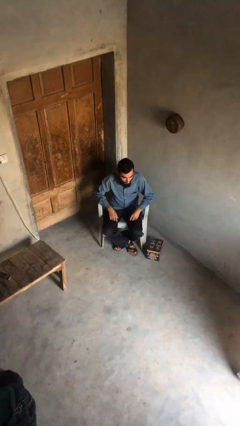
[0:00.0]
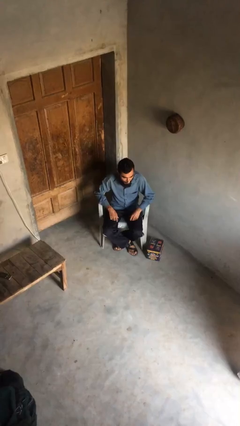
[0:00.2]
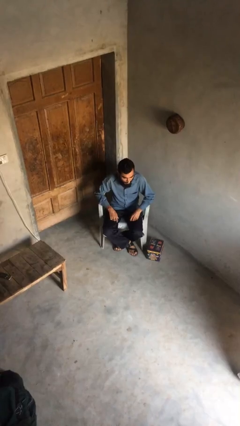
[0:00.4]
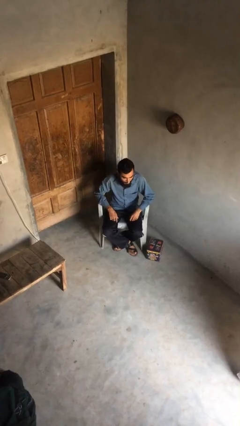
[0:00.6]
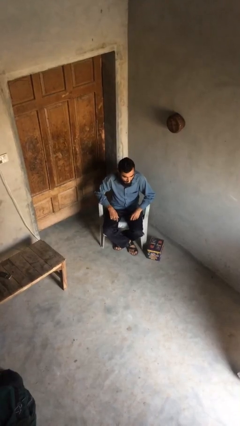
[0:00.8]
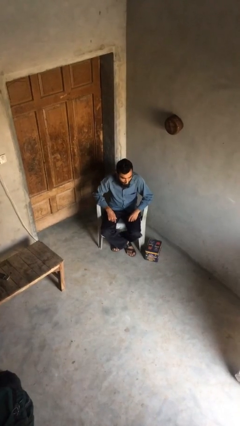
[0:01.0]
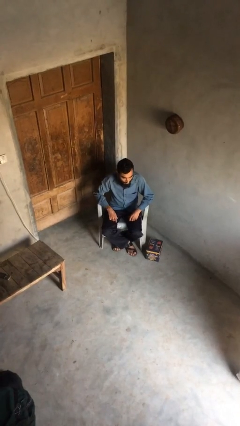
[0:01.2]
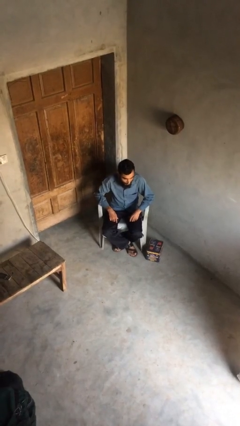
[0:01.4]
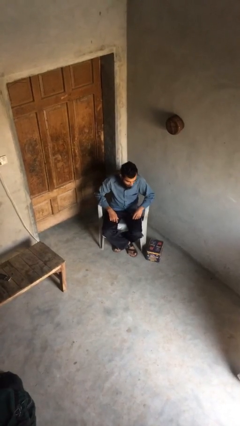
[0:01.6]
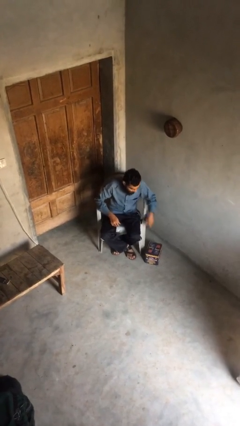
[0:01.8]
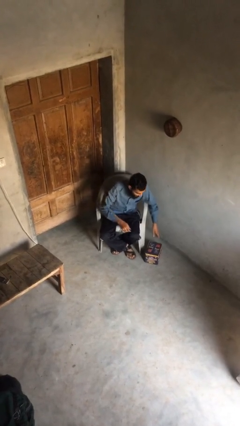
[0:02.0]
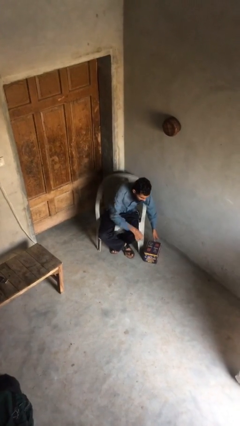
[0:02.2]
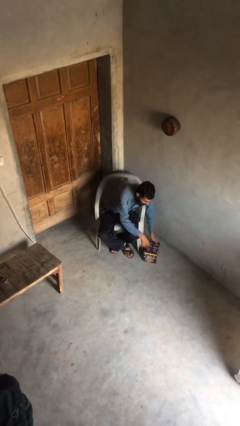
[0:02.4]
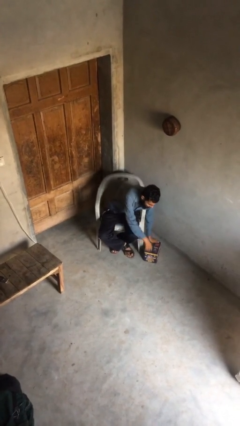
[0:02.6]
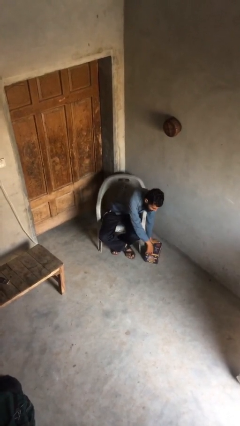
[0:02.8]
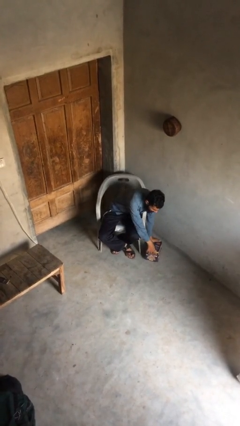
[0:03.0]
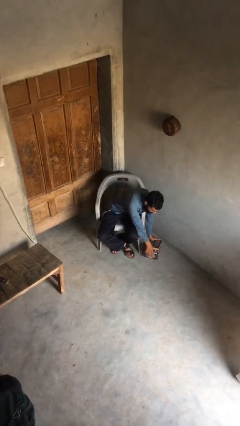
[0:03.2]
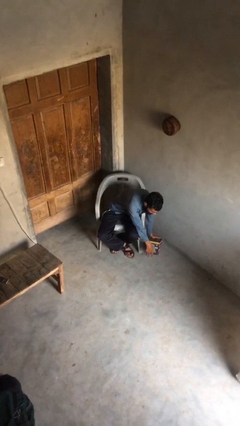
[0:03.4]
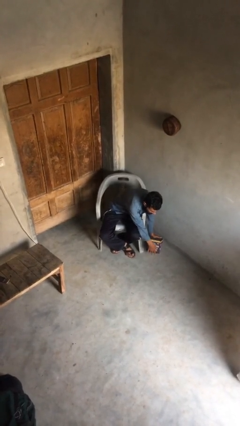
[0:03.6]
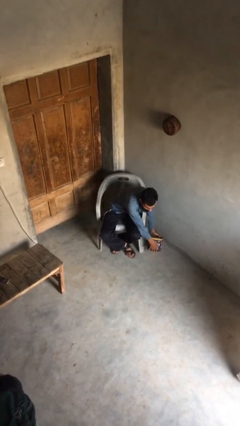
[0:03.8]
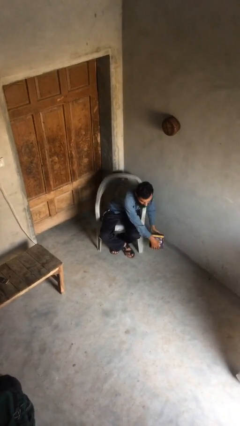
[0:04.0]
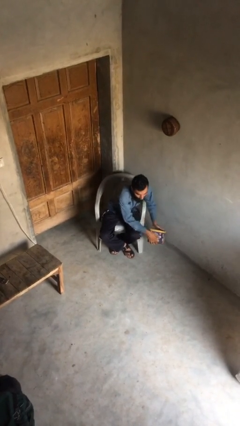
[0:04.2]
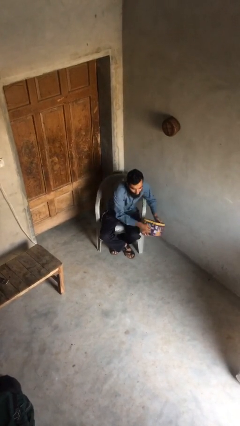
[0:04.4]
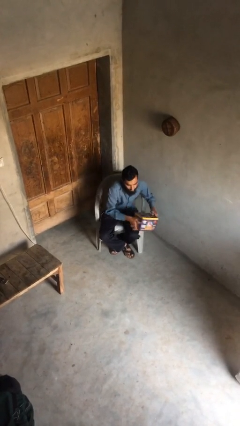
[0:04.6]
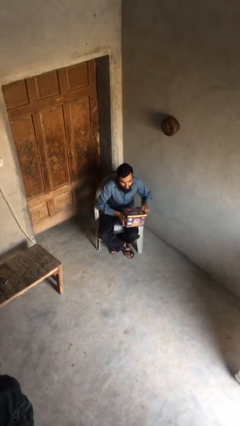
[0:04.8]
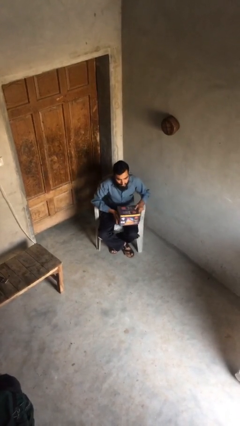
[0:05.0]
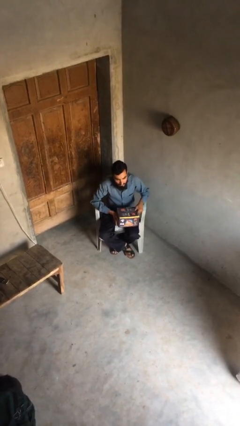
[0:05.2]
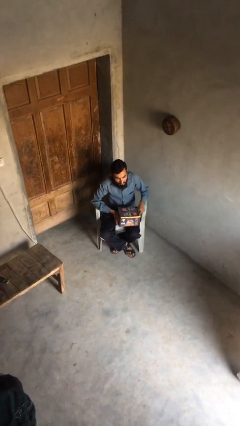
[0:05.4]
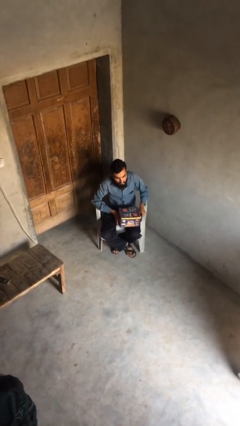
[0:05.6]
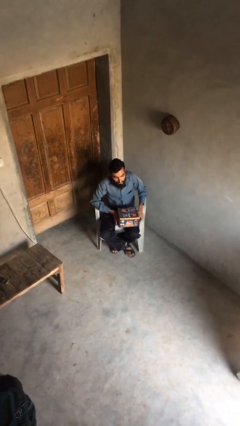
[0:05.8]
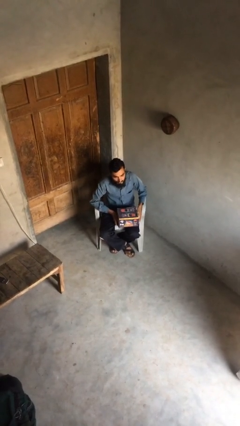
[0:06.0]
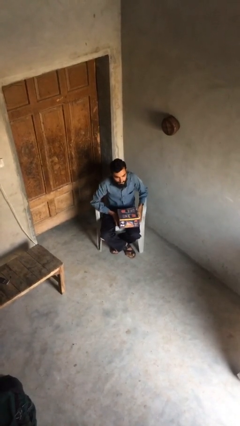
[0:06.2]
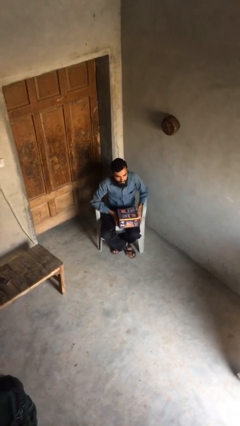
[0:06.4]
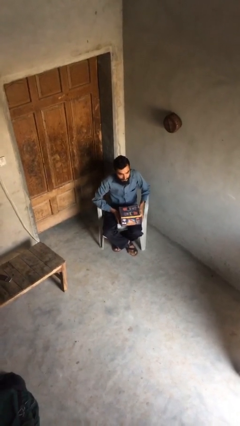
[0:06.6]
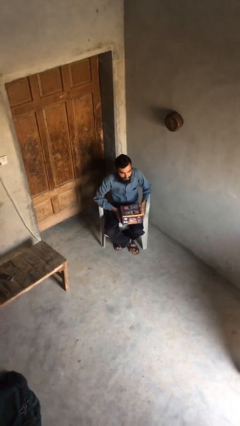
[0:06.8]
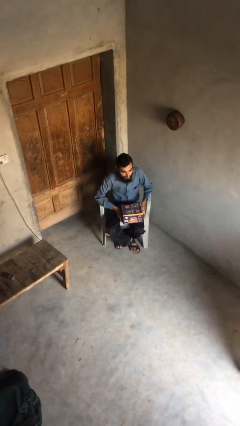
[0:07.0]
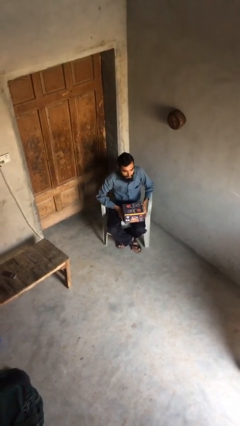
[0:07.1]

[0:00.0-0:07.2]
person picks up object from floor

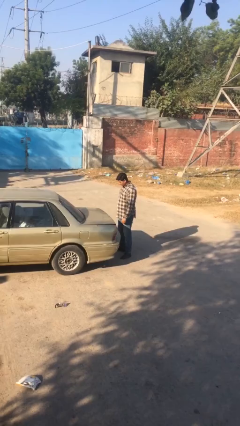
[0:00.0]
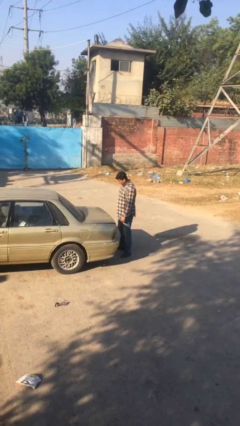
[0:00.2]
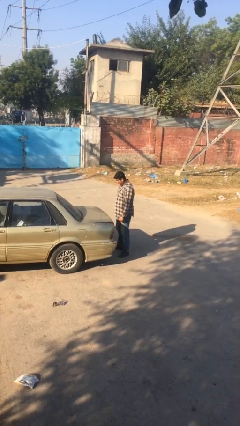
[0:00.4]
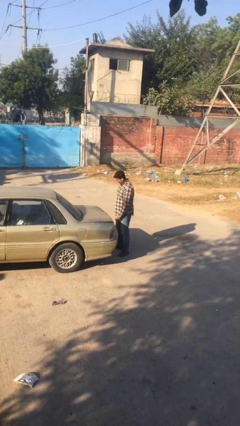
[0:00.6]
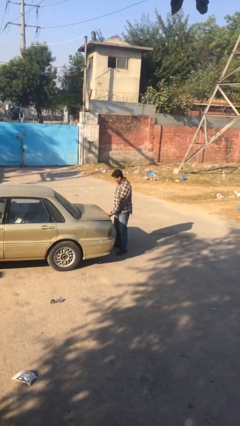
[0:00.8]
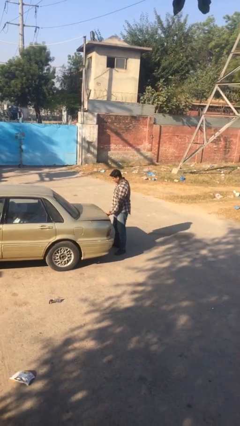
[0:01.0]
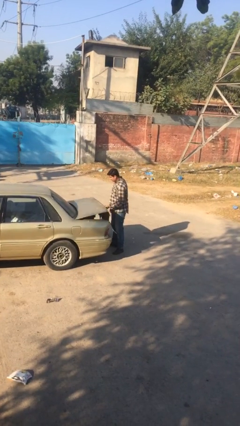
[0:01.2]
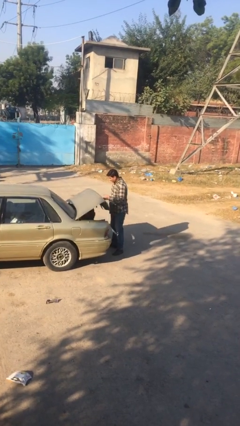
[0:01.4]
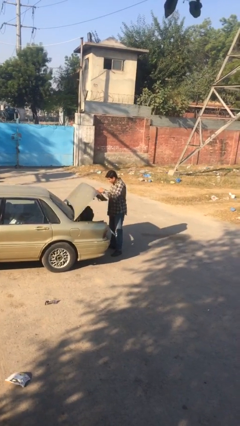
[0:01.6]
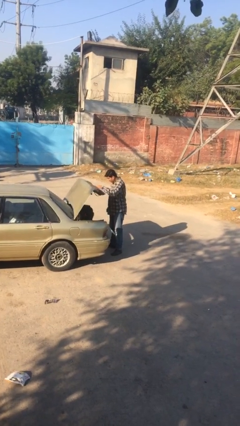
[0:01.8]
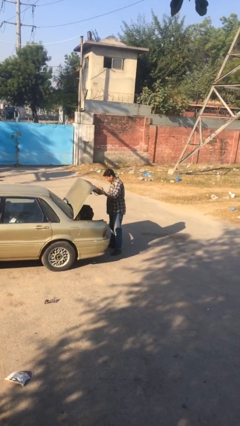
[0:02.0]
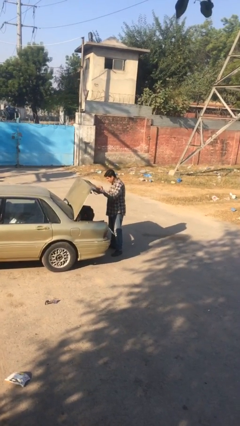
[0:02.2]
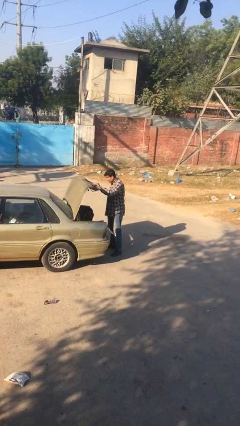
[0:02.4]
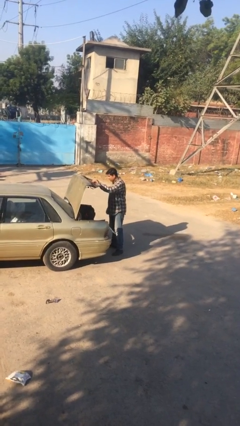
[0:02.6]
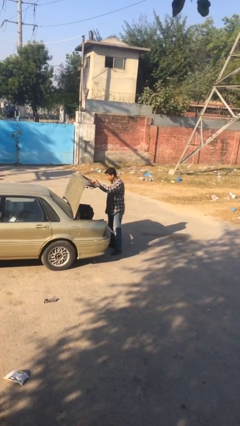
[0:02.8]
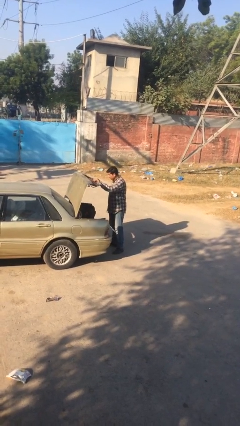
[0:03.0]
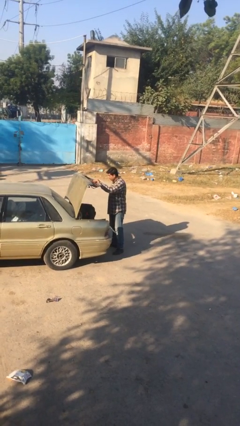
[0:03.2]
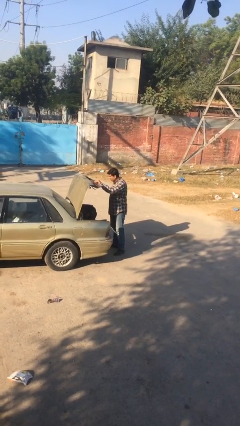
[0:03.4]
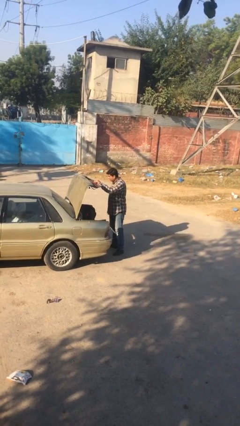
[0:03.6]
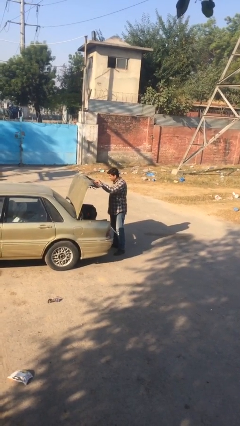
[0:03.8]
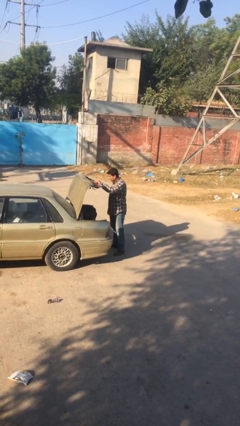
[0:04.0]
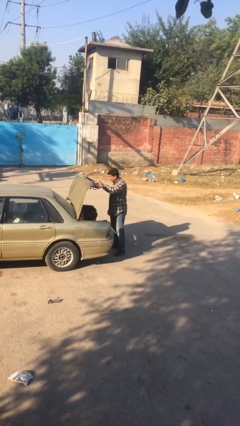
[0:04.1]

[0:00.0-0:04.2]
person opens car trunk

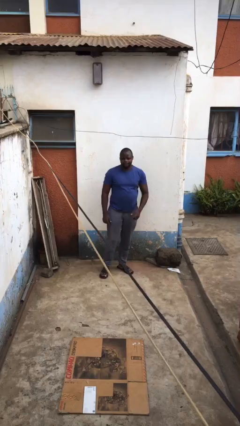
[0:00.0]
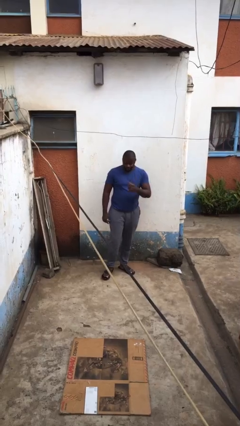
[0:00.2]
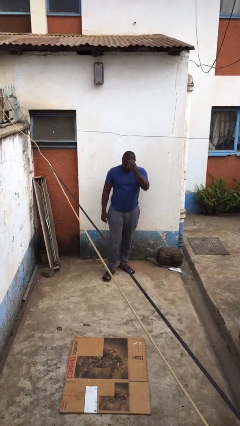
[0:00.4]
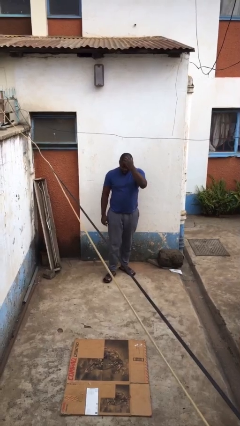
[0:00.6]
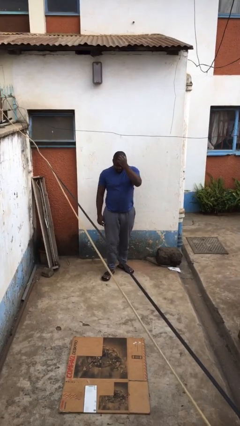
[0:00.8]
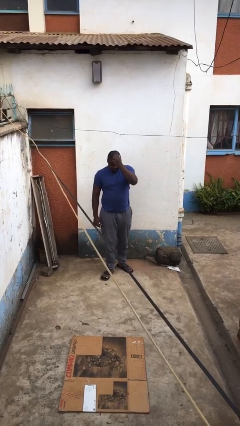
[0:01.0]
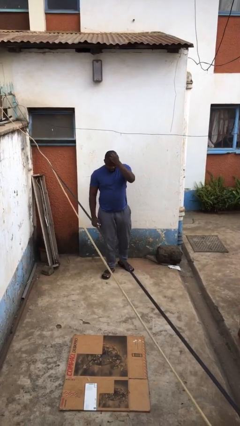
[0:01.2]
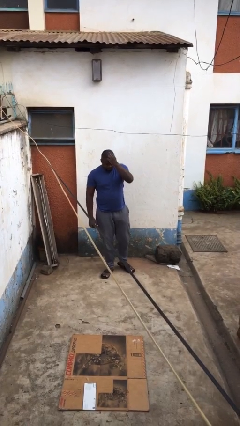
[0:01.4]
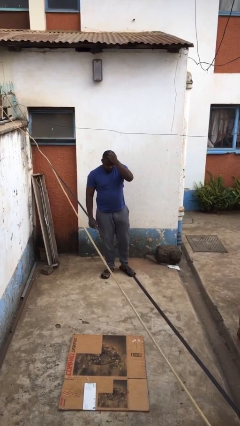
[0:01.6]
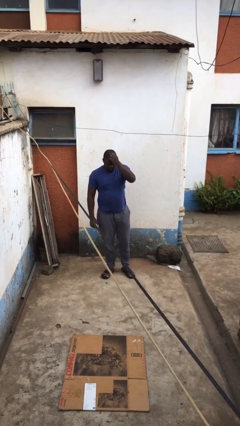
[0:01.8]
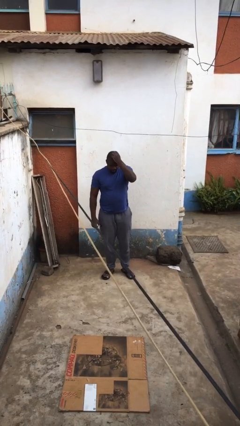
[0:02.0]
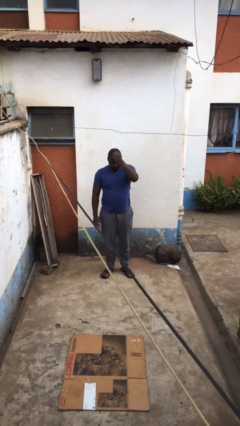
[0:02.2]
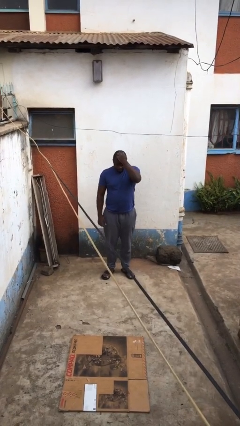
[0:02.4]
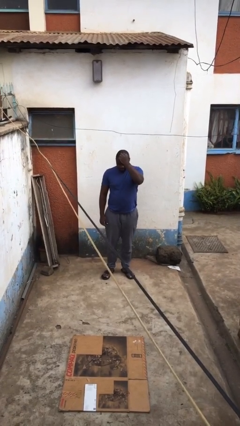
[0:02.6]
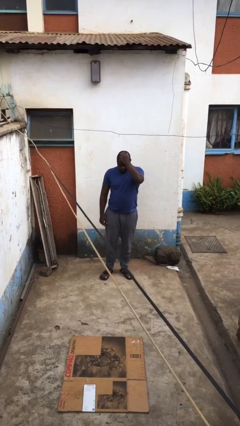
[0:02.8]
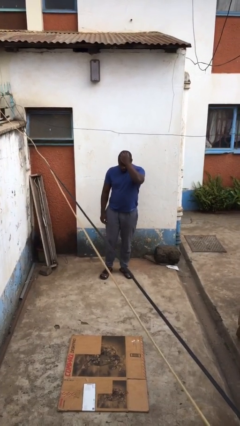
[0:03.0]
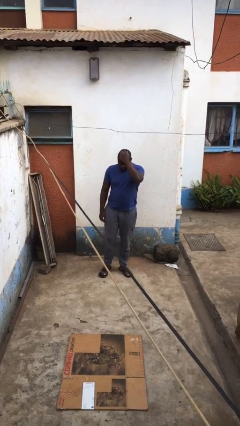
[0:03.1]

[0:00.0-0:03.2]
person scratches face

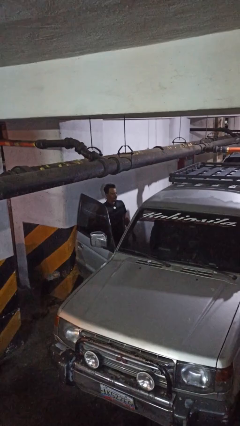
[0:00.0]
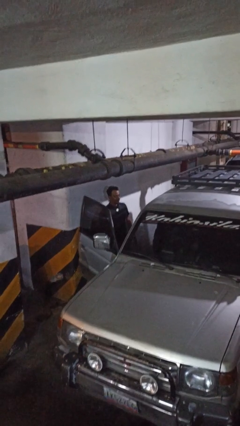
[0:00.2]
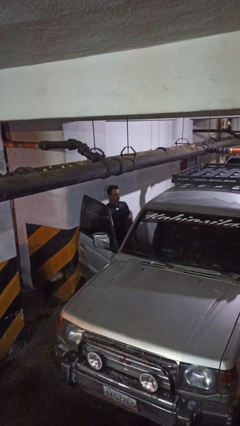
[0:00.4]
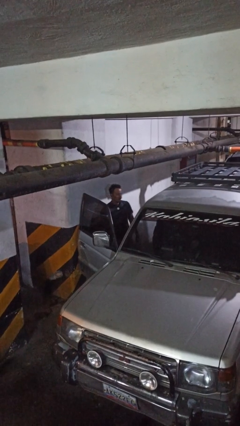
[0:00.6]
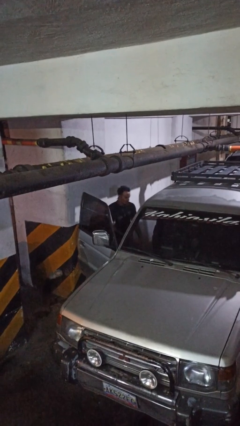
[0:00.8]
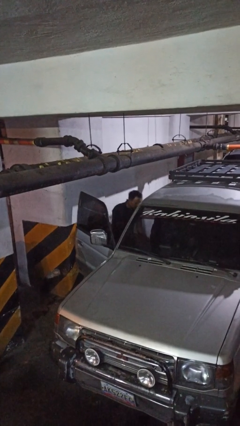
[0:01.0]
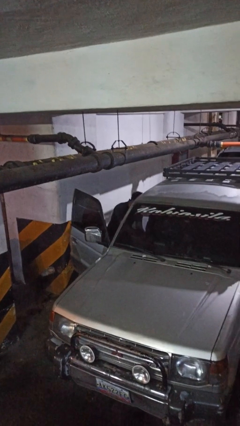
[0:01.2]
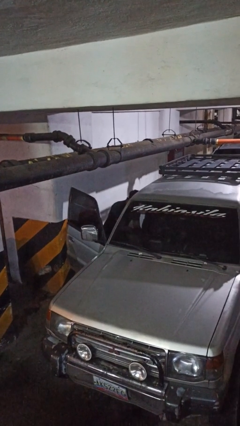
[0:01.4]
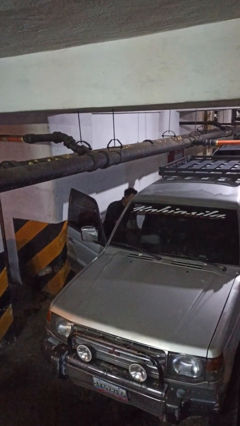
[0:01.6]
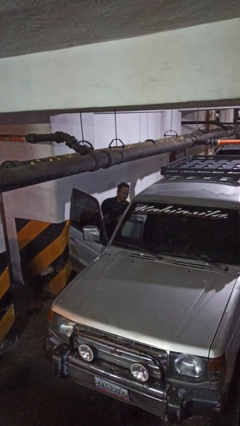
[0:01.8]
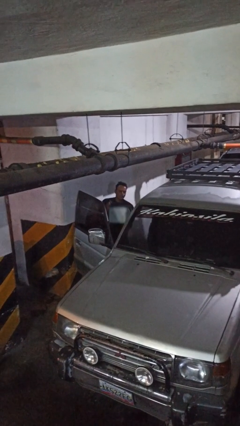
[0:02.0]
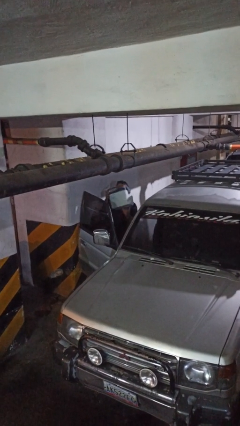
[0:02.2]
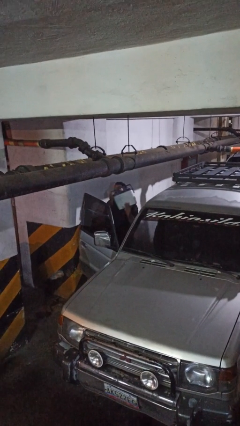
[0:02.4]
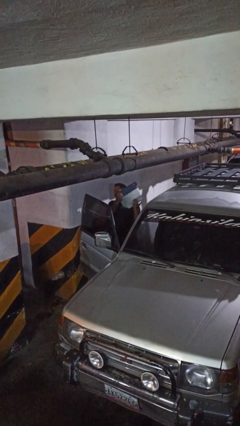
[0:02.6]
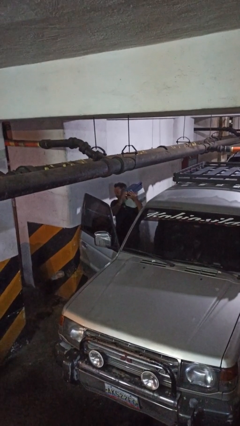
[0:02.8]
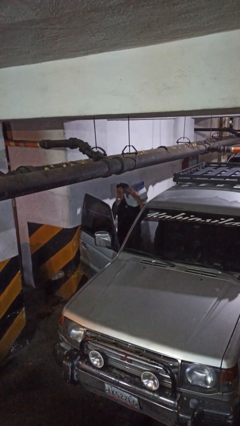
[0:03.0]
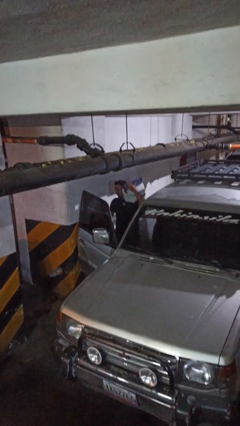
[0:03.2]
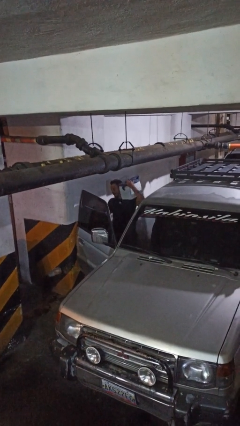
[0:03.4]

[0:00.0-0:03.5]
person unloads car
